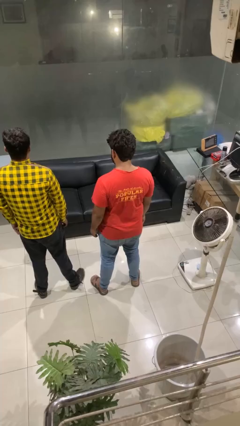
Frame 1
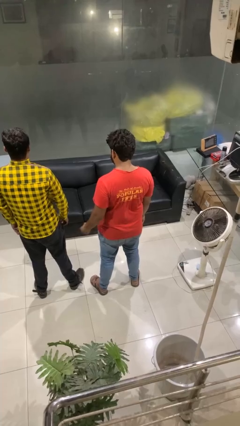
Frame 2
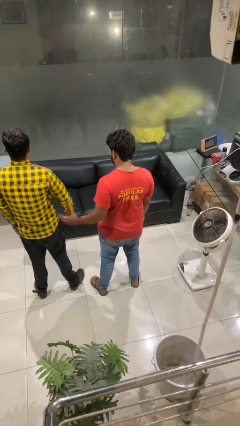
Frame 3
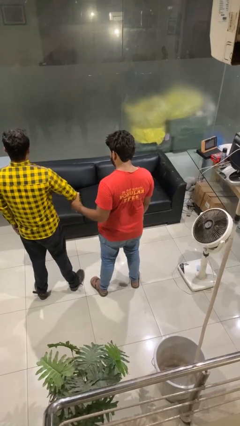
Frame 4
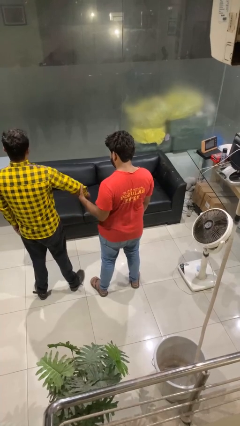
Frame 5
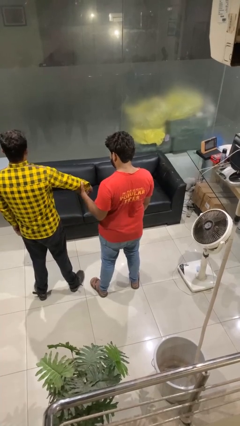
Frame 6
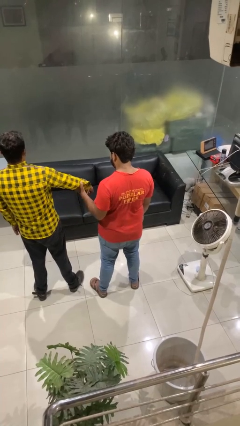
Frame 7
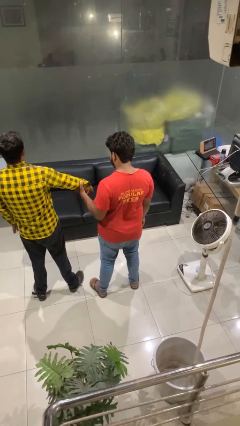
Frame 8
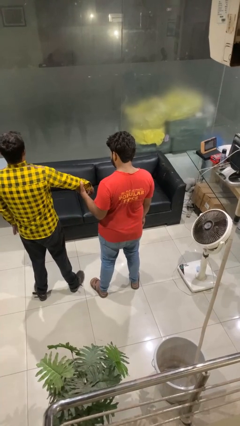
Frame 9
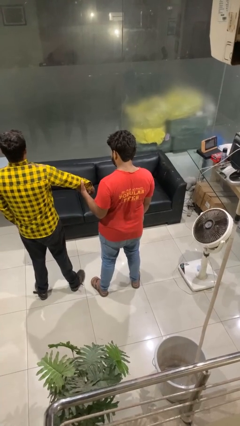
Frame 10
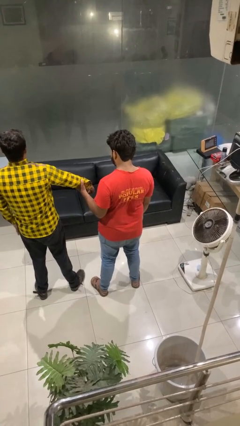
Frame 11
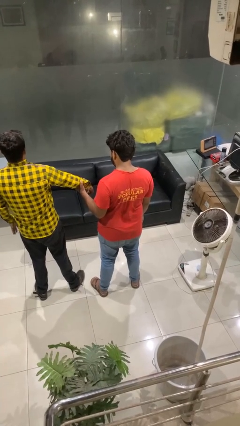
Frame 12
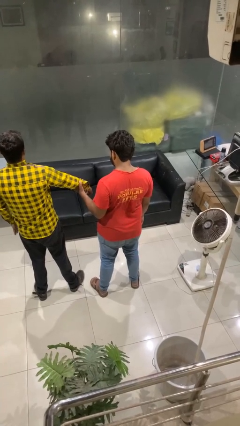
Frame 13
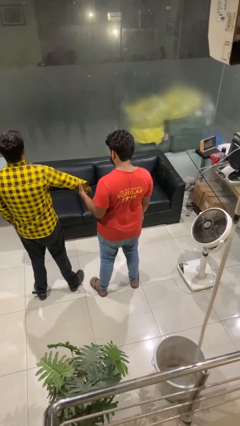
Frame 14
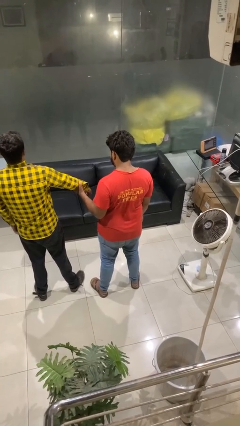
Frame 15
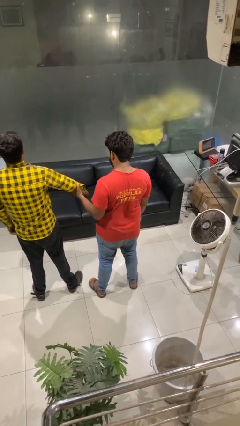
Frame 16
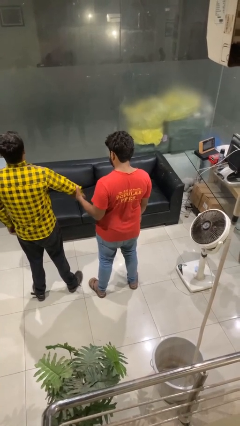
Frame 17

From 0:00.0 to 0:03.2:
person grabs person by forearm

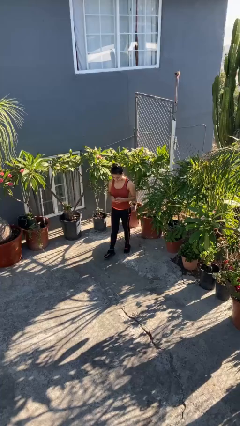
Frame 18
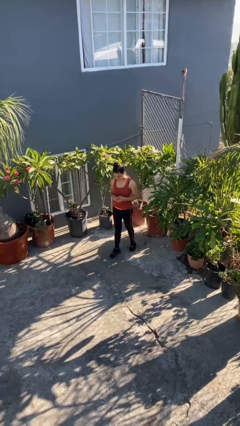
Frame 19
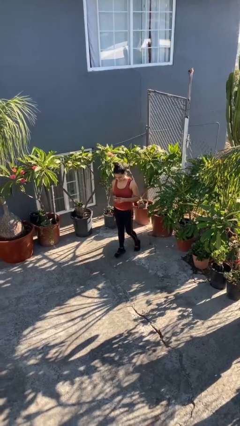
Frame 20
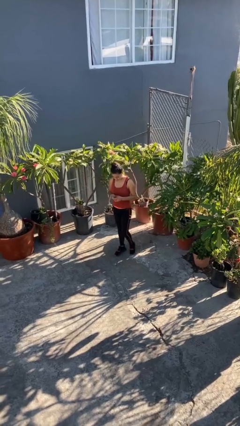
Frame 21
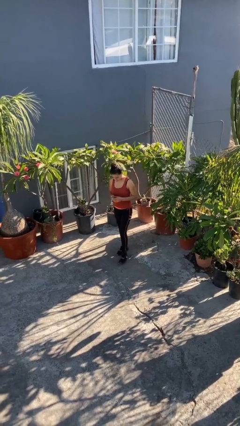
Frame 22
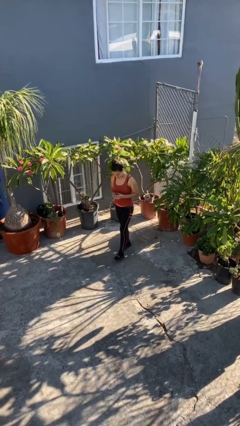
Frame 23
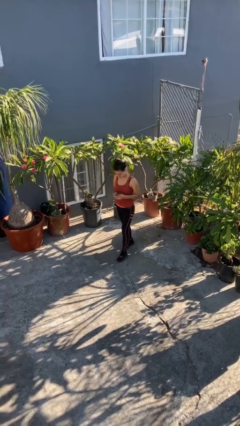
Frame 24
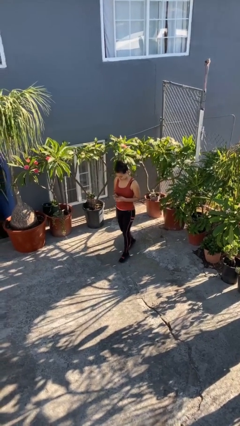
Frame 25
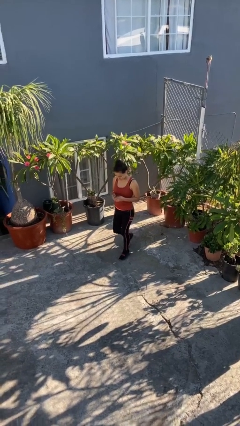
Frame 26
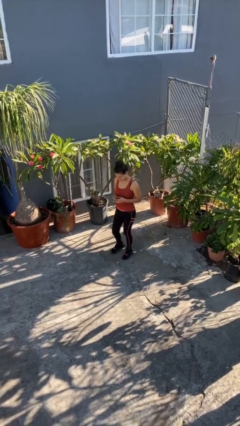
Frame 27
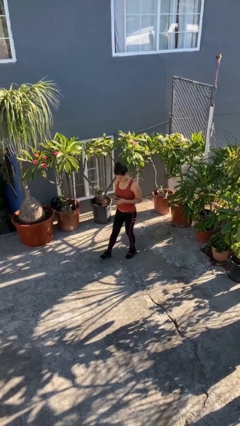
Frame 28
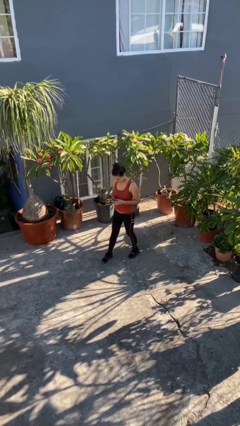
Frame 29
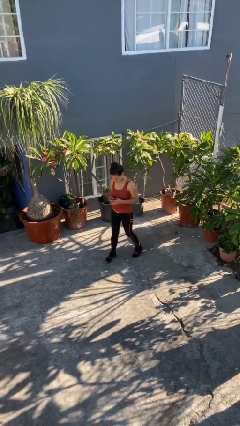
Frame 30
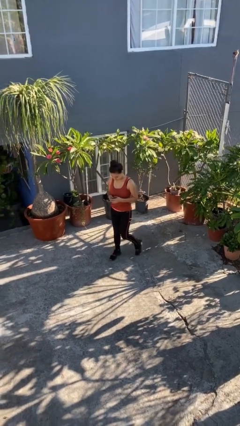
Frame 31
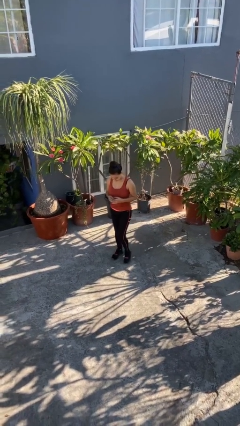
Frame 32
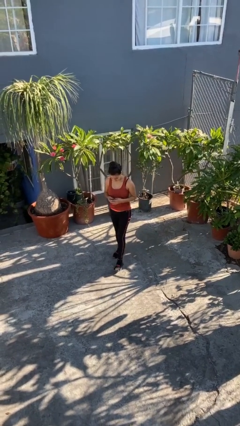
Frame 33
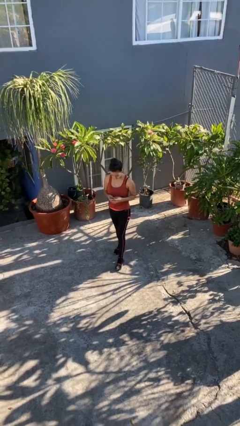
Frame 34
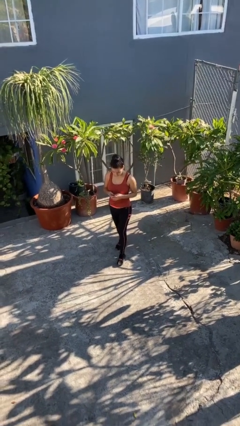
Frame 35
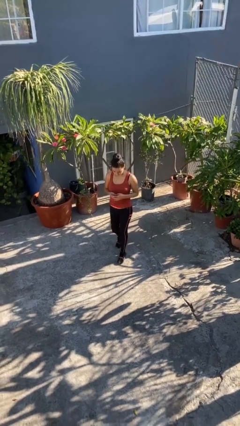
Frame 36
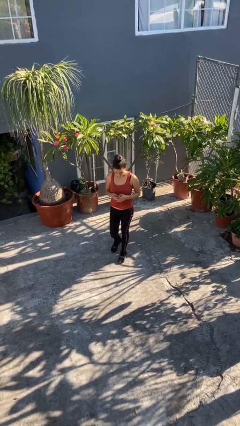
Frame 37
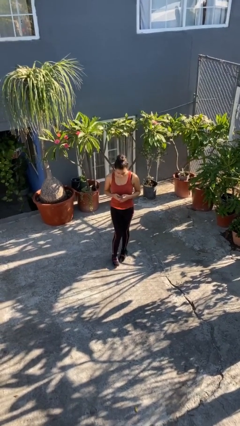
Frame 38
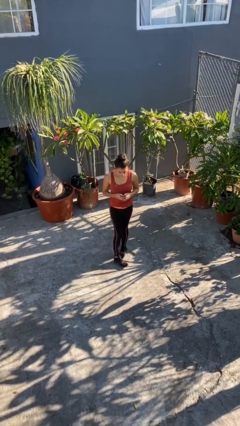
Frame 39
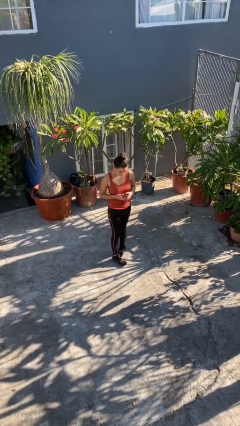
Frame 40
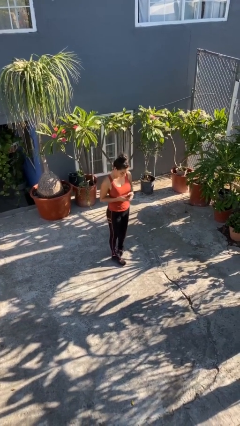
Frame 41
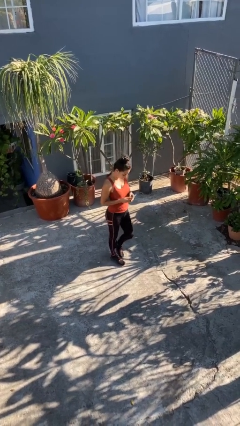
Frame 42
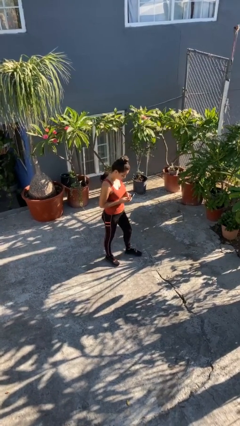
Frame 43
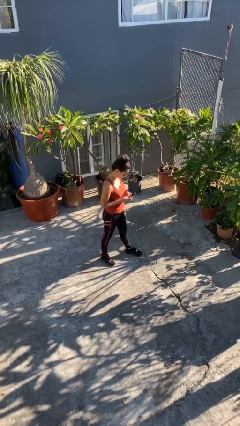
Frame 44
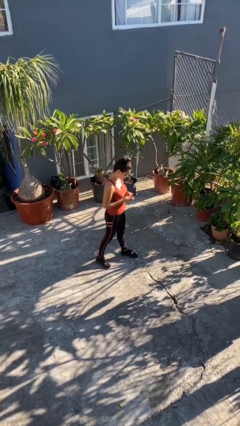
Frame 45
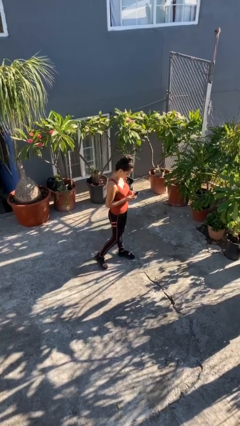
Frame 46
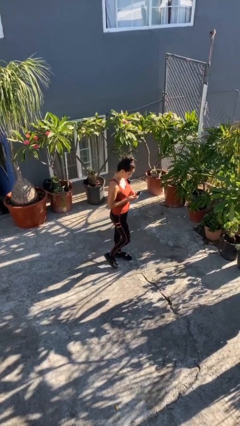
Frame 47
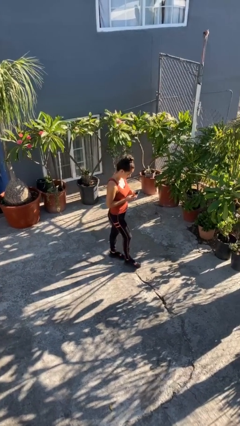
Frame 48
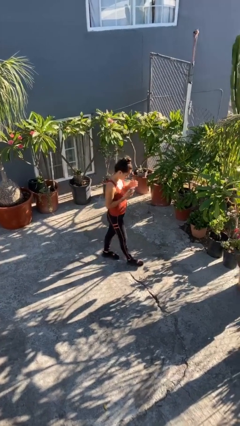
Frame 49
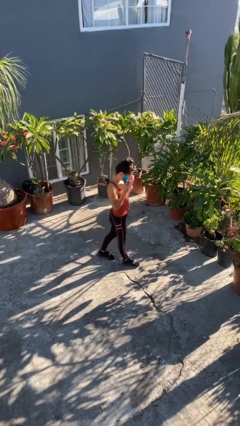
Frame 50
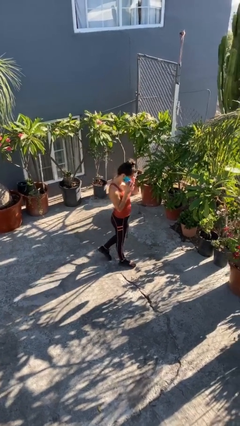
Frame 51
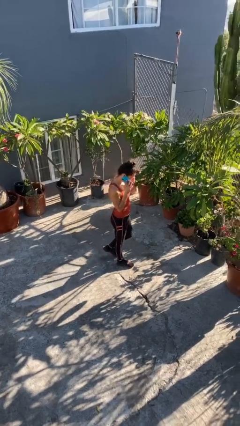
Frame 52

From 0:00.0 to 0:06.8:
person texts on phone

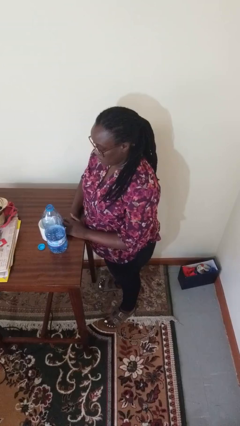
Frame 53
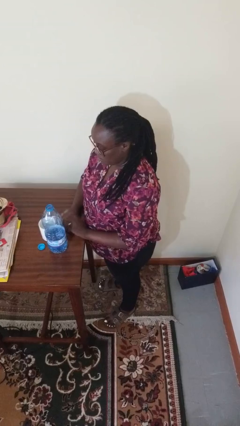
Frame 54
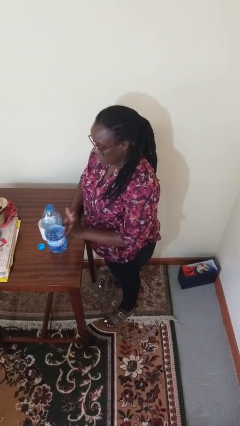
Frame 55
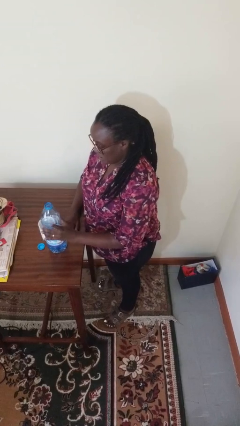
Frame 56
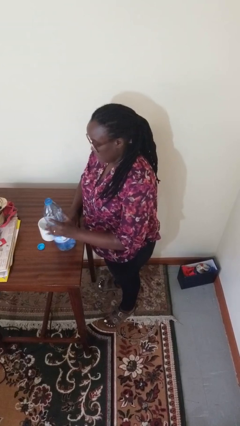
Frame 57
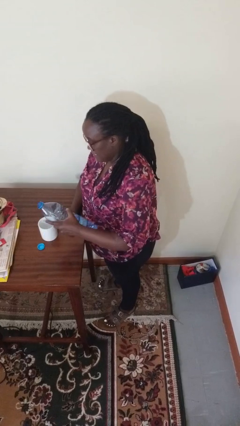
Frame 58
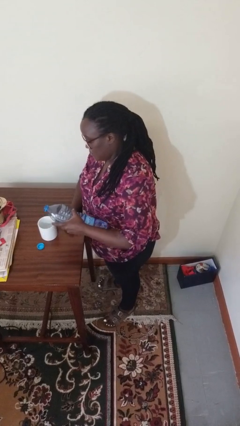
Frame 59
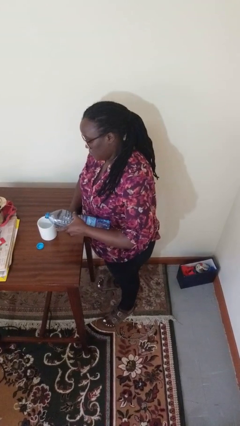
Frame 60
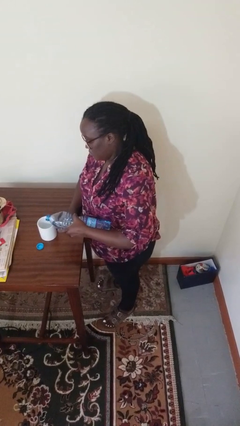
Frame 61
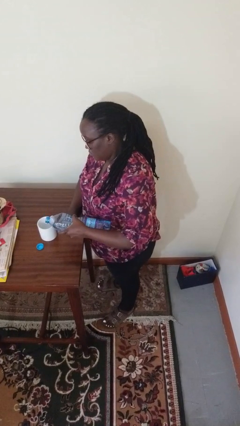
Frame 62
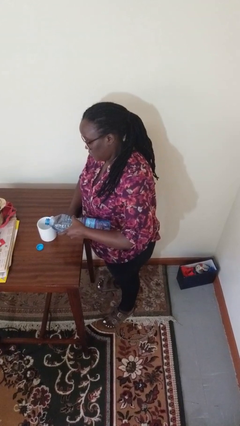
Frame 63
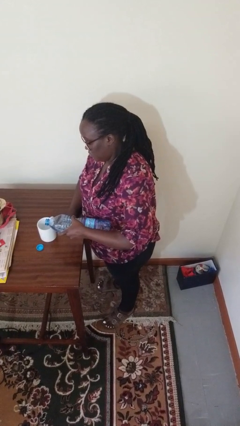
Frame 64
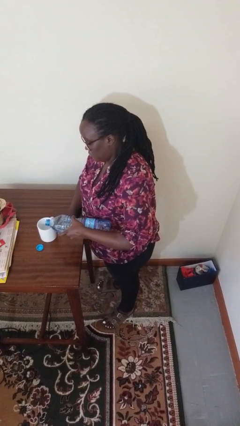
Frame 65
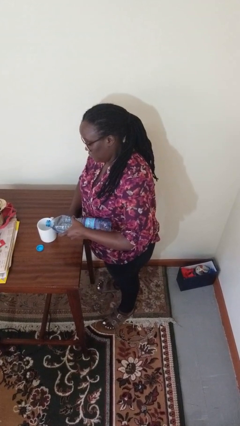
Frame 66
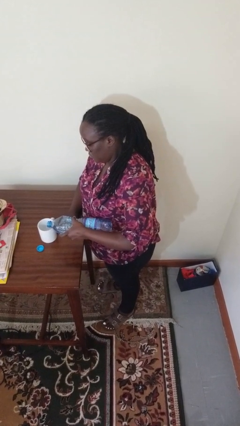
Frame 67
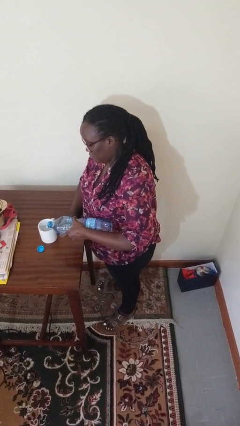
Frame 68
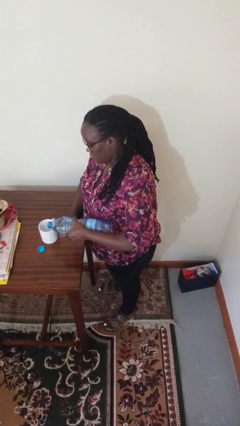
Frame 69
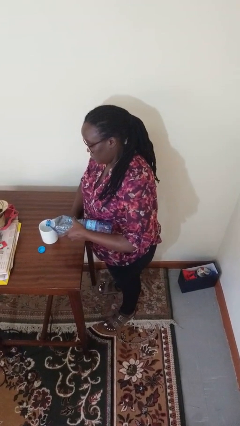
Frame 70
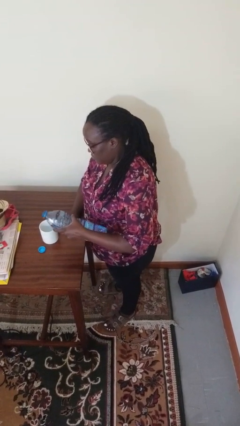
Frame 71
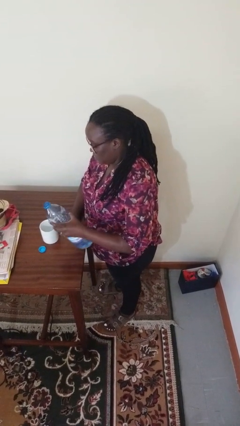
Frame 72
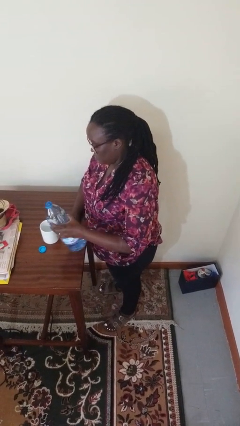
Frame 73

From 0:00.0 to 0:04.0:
person pours liquid into cup

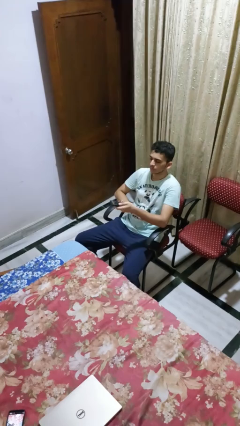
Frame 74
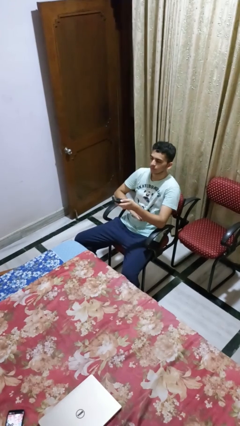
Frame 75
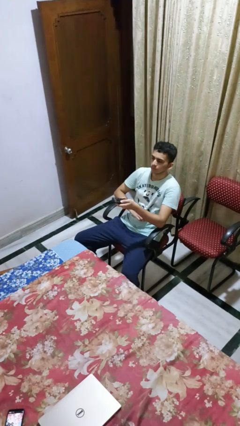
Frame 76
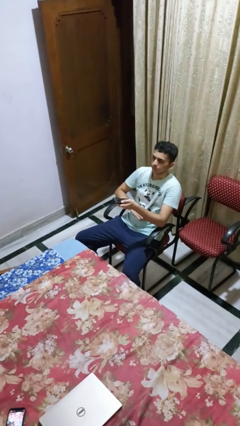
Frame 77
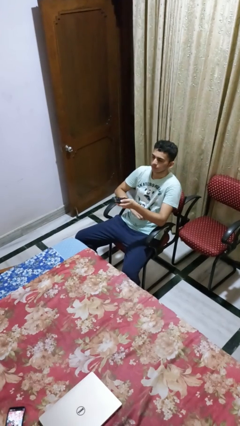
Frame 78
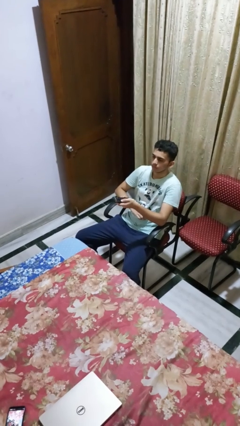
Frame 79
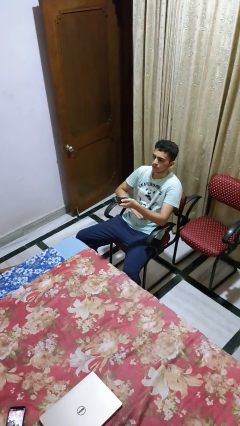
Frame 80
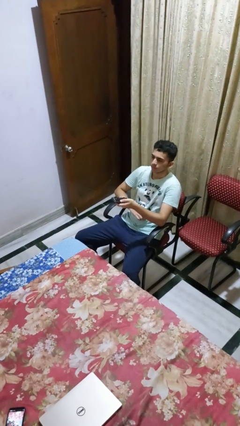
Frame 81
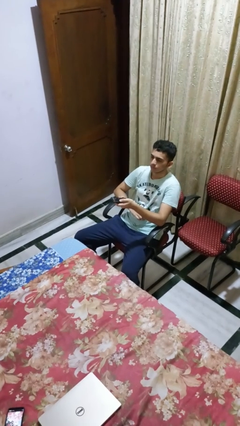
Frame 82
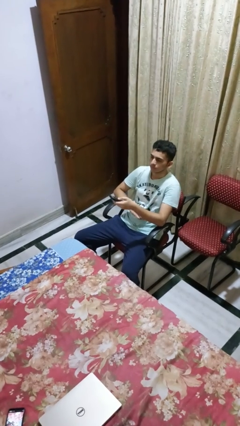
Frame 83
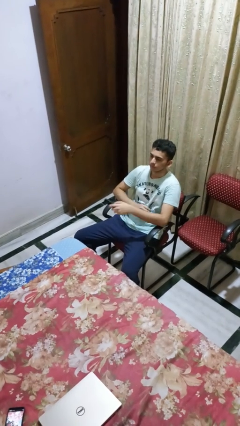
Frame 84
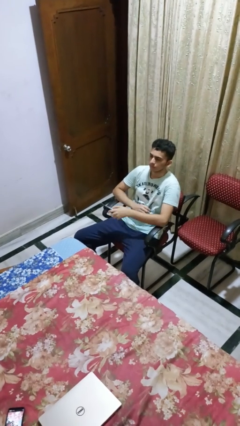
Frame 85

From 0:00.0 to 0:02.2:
person uses television remote

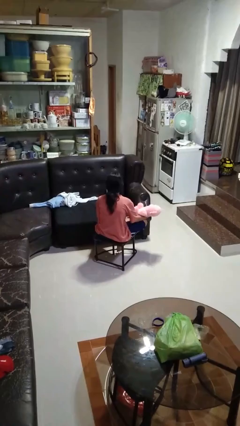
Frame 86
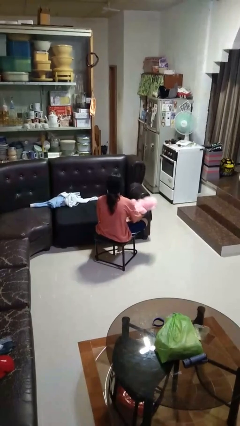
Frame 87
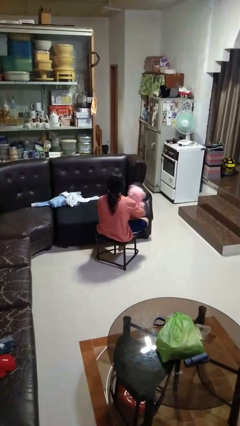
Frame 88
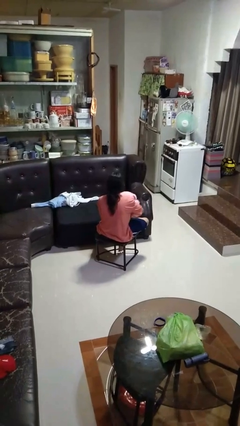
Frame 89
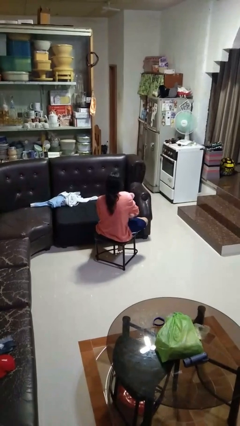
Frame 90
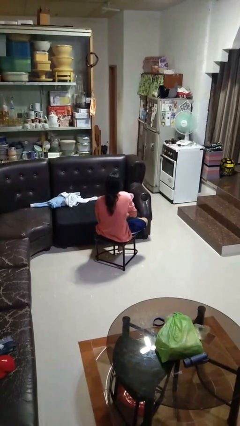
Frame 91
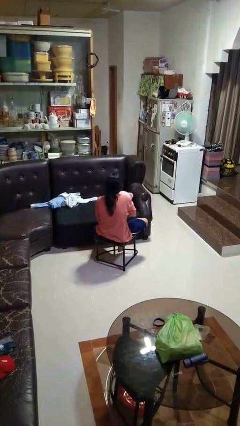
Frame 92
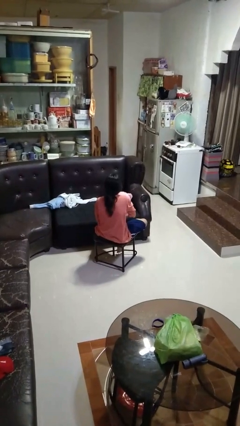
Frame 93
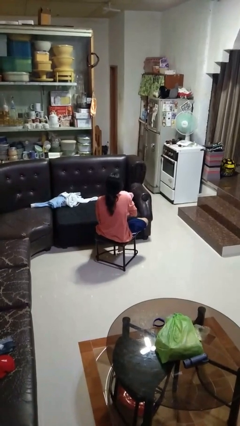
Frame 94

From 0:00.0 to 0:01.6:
person hugs stuffed animal
